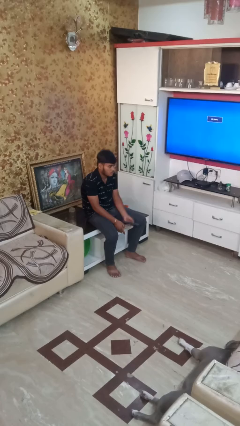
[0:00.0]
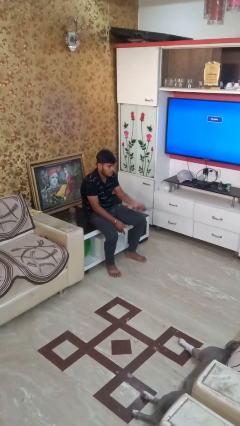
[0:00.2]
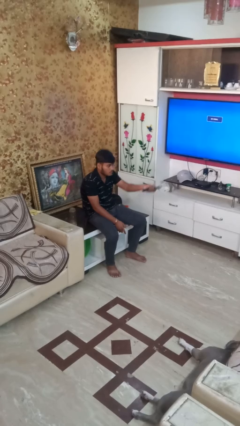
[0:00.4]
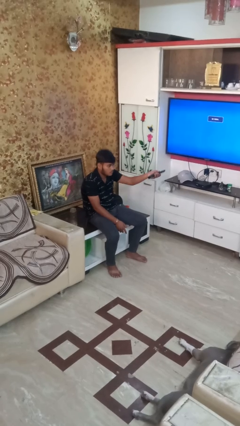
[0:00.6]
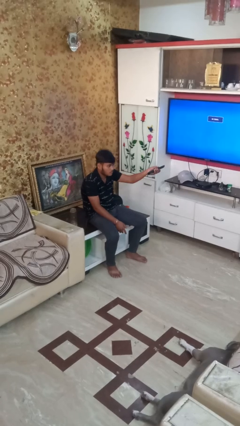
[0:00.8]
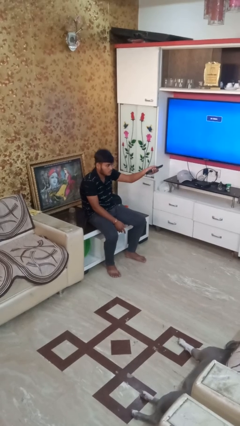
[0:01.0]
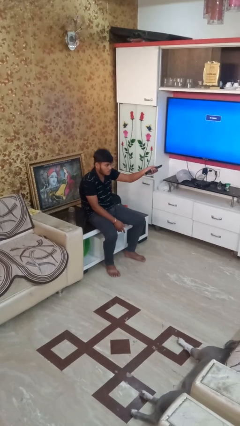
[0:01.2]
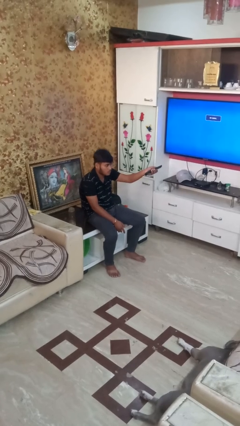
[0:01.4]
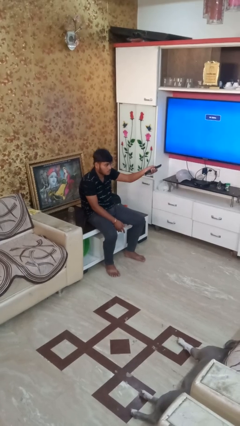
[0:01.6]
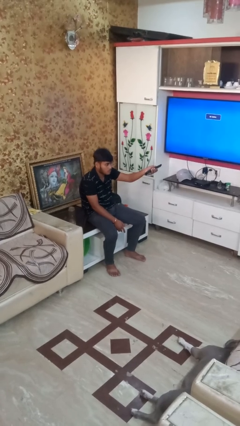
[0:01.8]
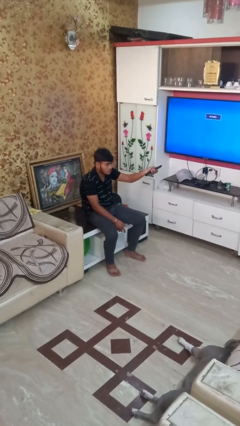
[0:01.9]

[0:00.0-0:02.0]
person uses television remote

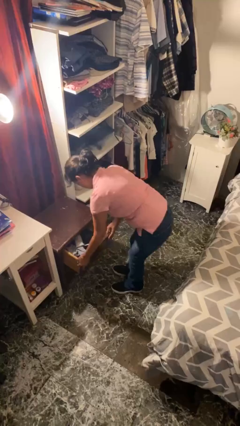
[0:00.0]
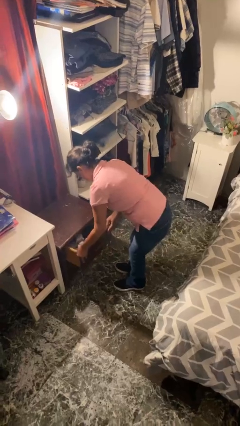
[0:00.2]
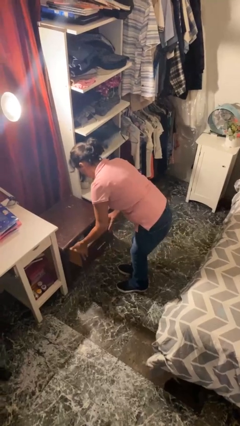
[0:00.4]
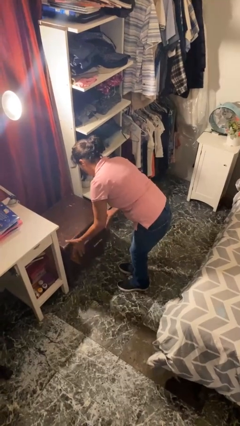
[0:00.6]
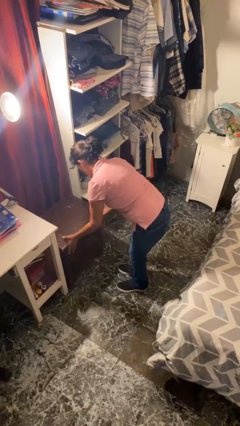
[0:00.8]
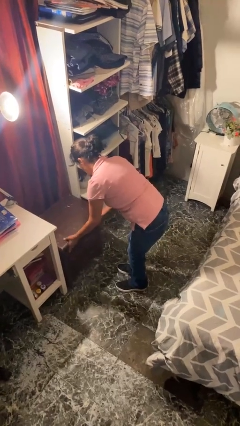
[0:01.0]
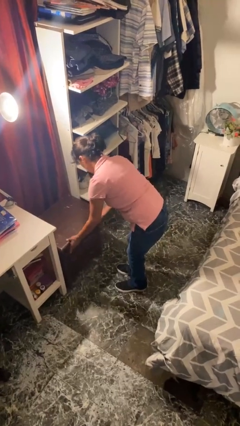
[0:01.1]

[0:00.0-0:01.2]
person closes dresser drawer

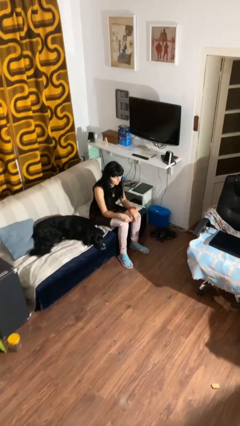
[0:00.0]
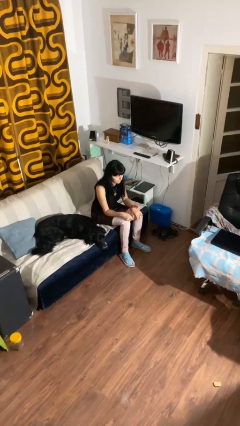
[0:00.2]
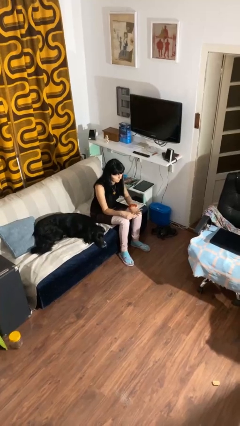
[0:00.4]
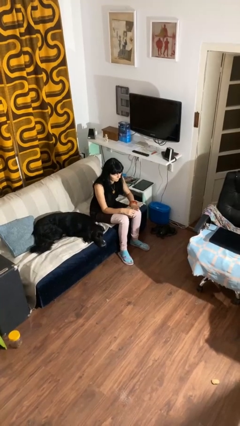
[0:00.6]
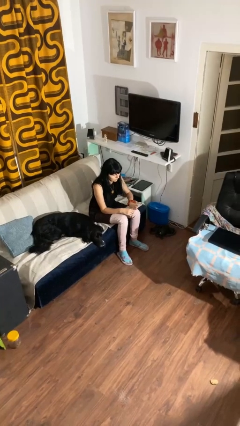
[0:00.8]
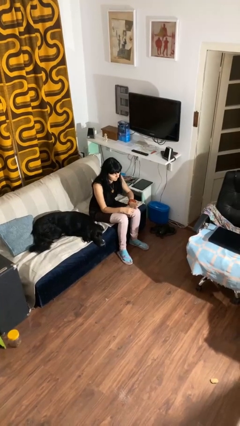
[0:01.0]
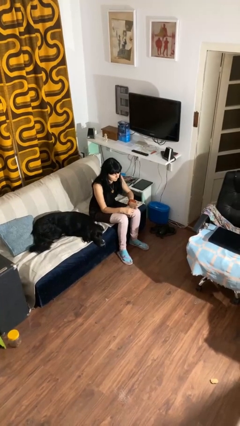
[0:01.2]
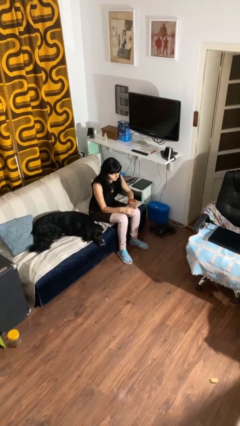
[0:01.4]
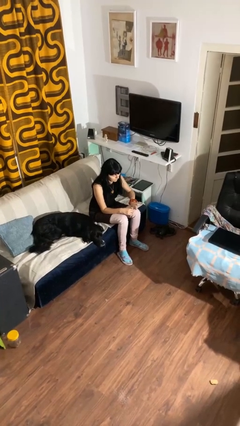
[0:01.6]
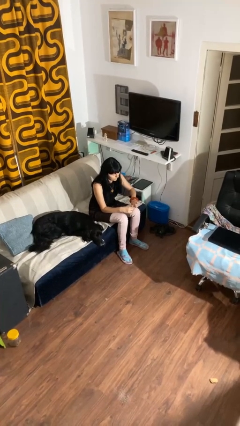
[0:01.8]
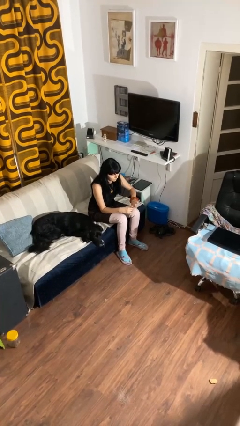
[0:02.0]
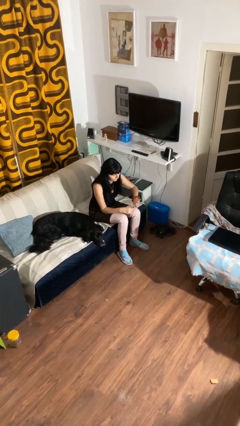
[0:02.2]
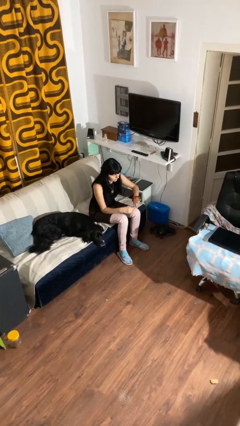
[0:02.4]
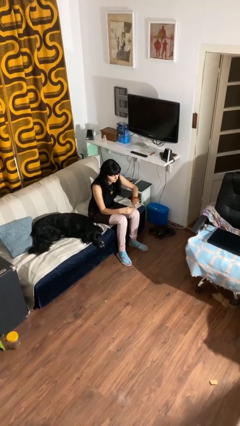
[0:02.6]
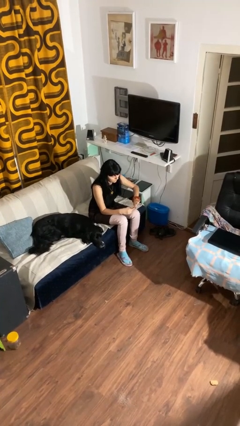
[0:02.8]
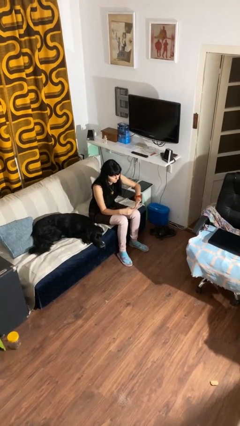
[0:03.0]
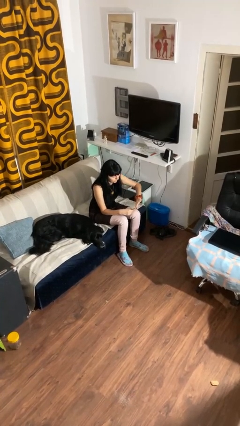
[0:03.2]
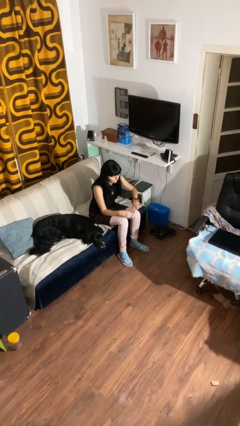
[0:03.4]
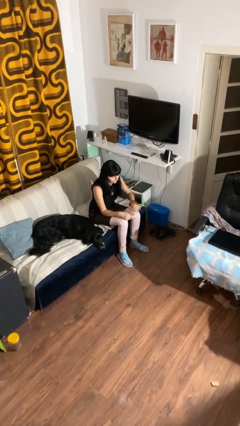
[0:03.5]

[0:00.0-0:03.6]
person clips fingernails

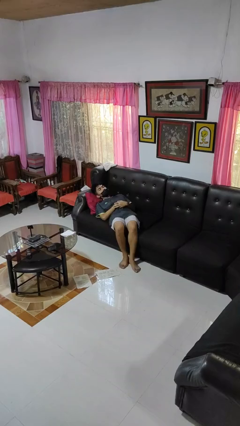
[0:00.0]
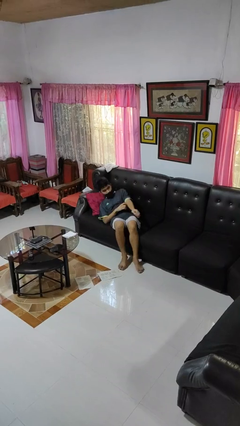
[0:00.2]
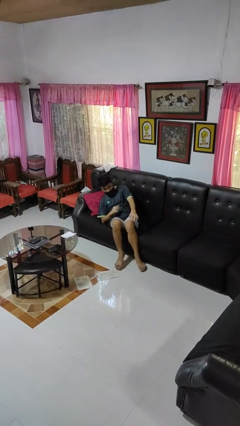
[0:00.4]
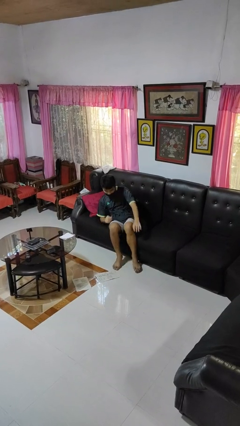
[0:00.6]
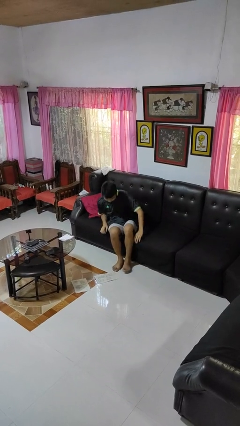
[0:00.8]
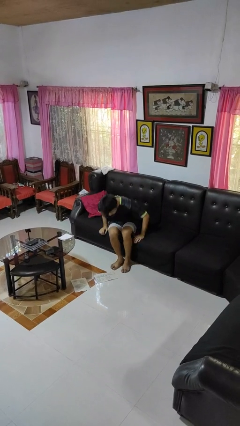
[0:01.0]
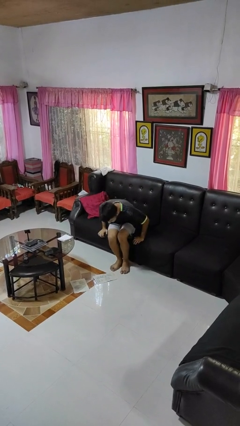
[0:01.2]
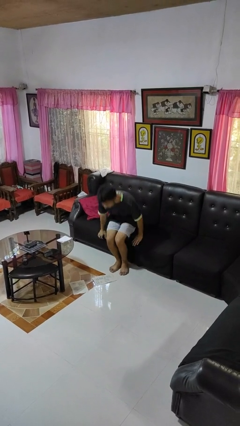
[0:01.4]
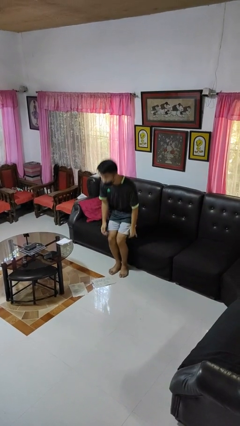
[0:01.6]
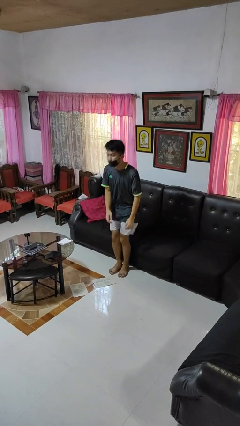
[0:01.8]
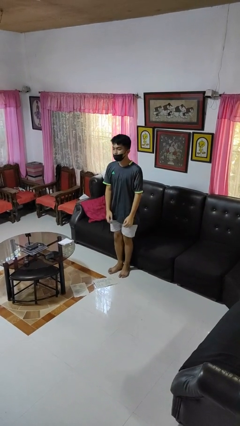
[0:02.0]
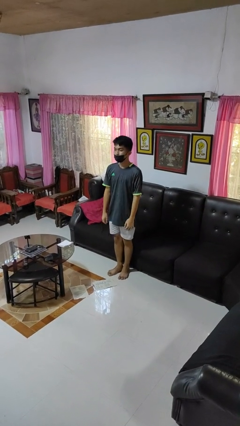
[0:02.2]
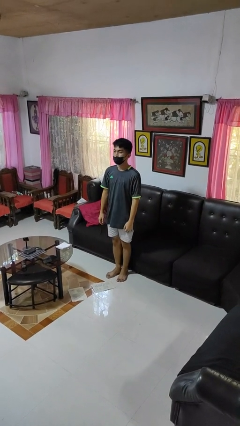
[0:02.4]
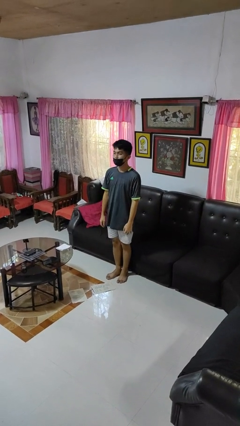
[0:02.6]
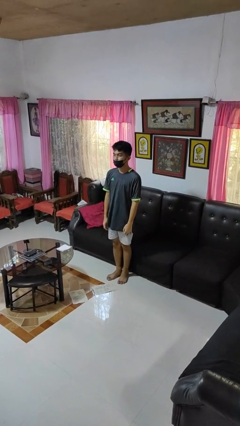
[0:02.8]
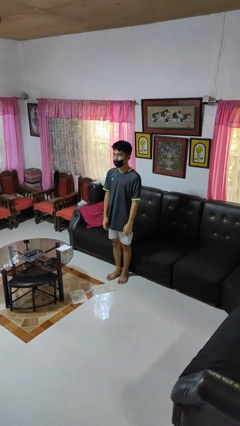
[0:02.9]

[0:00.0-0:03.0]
person stands up

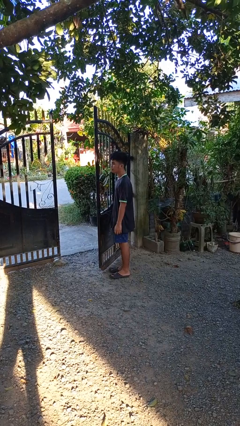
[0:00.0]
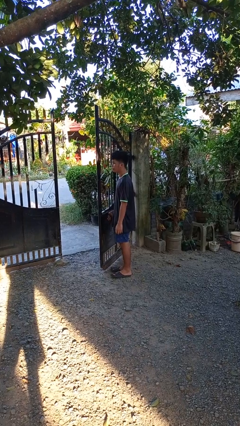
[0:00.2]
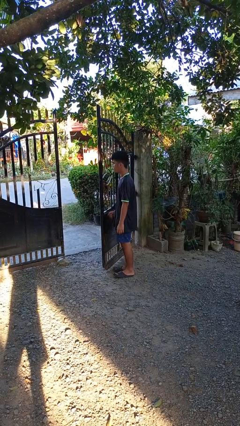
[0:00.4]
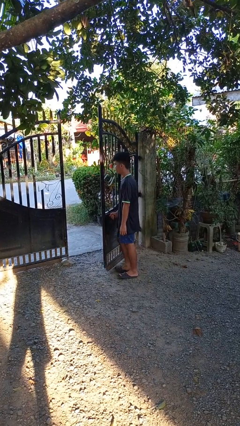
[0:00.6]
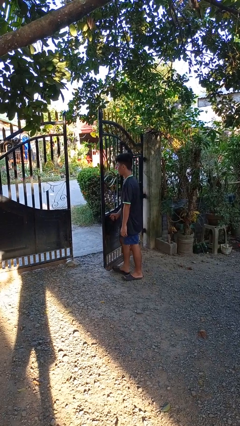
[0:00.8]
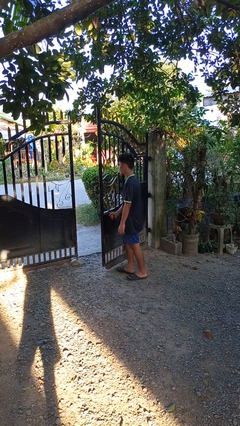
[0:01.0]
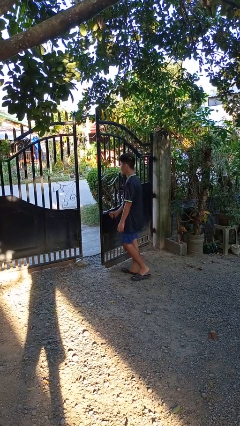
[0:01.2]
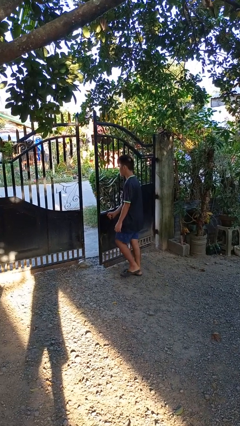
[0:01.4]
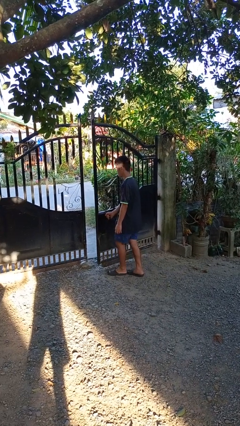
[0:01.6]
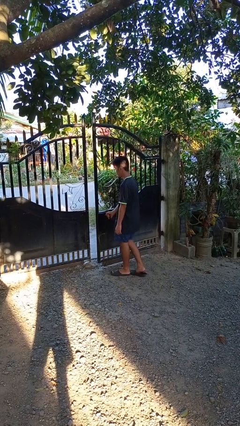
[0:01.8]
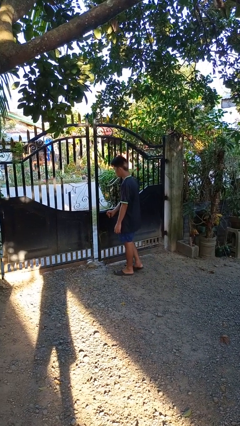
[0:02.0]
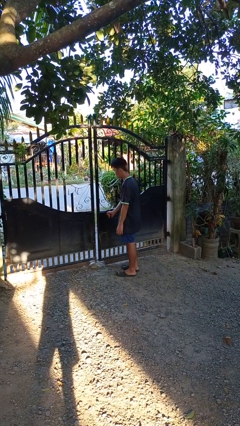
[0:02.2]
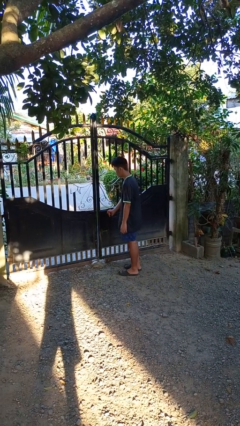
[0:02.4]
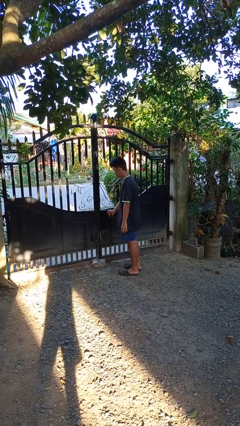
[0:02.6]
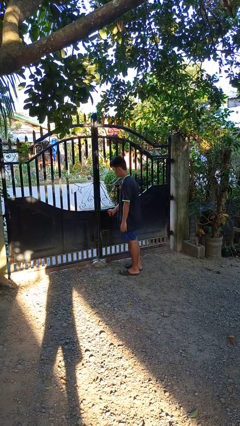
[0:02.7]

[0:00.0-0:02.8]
person closes gate

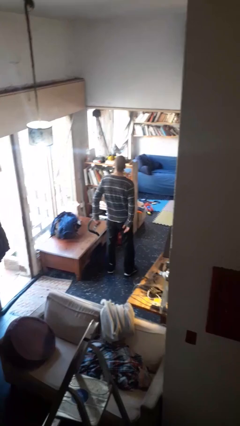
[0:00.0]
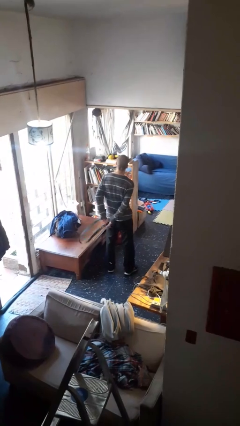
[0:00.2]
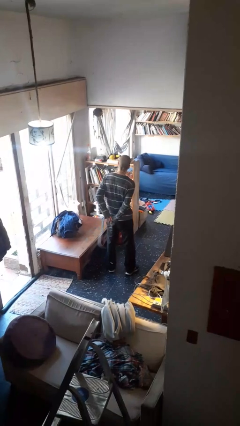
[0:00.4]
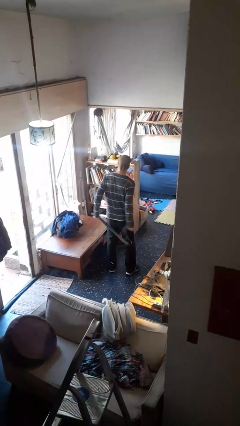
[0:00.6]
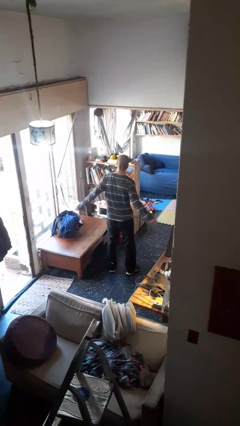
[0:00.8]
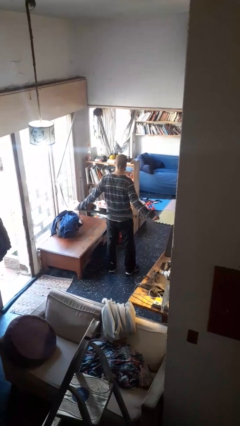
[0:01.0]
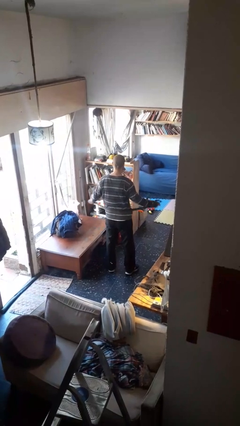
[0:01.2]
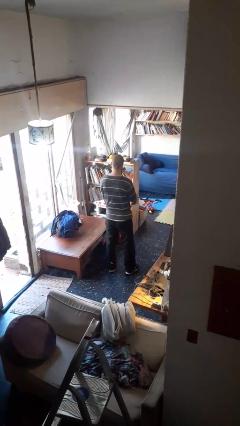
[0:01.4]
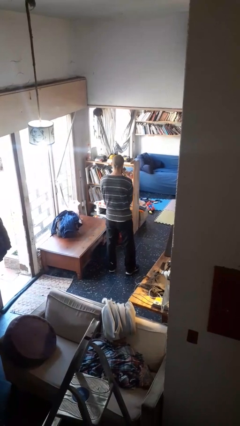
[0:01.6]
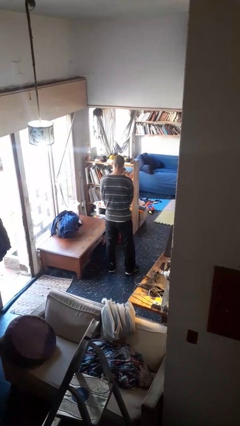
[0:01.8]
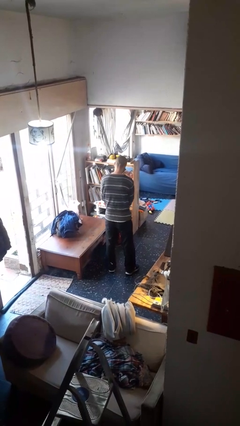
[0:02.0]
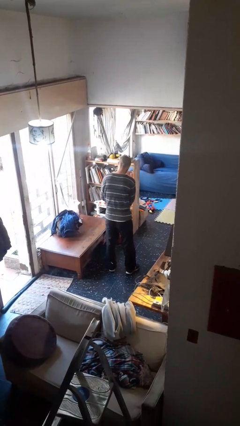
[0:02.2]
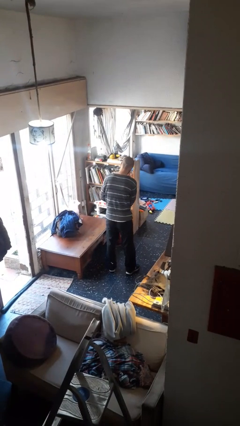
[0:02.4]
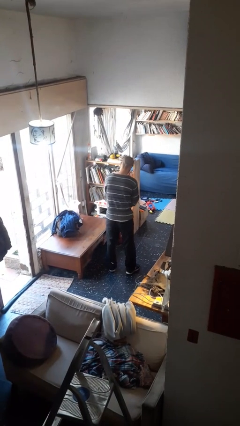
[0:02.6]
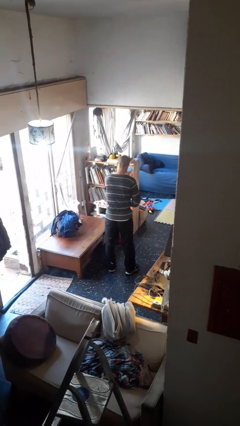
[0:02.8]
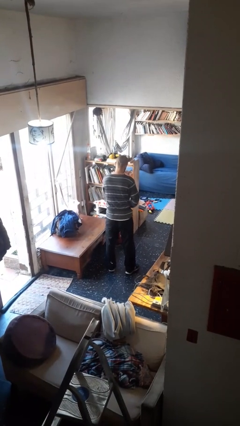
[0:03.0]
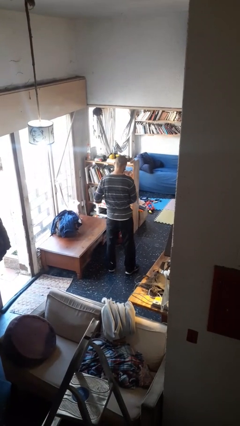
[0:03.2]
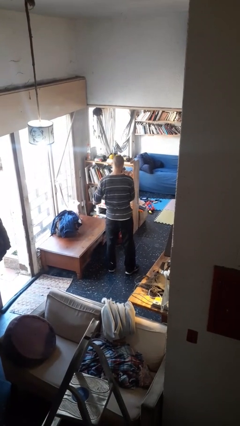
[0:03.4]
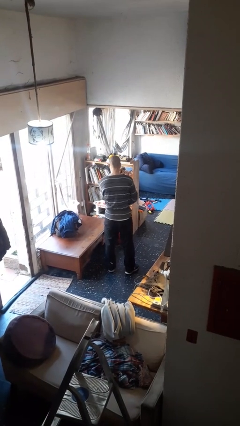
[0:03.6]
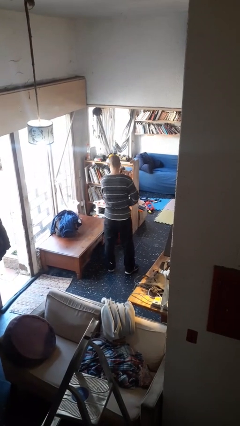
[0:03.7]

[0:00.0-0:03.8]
person puts on belt

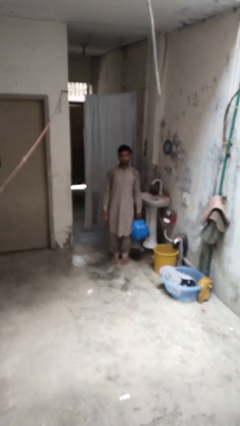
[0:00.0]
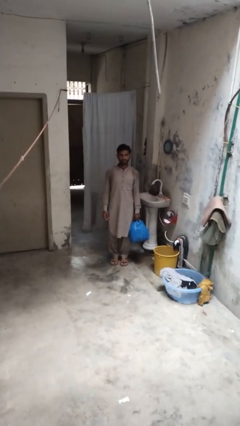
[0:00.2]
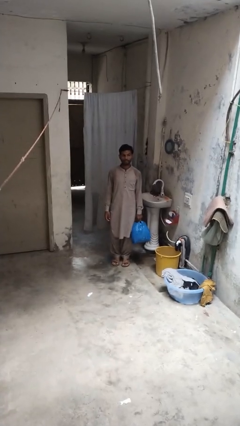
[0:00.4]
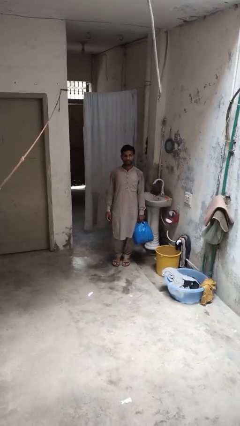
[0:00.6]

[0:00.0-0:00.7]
person carries groceries

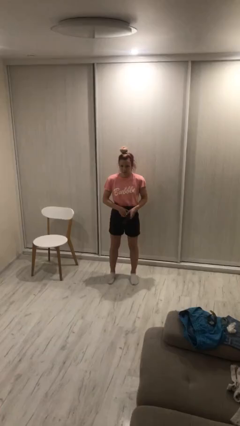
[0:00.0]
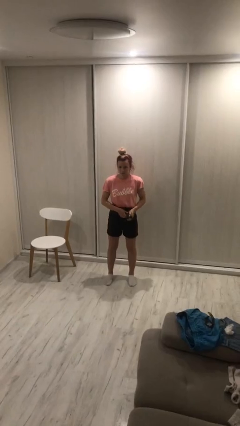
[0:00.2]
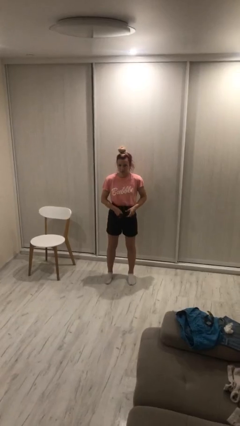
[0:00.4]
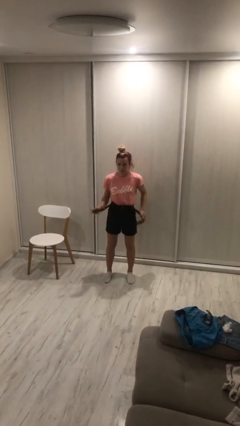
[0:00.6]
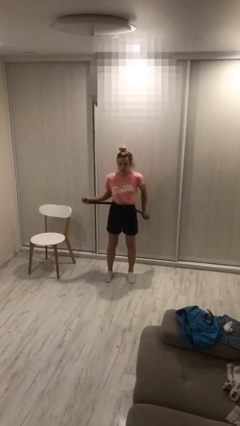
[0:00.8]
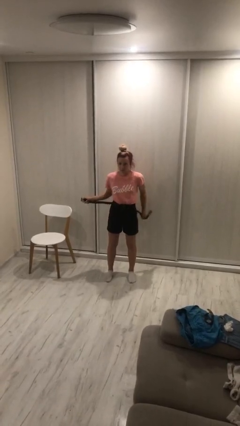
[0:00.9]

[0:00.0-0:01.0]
person takes off belt